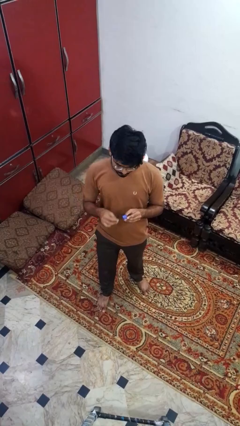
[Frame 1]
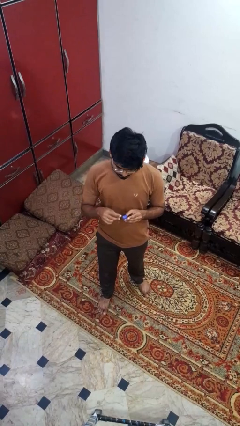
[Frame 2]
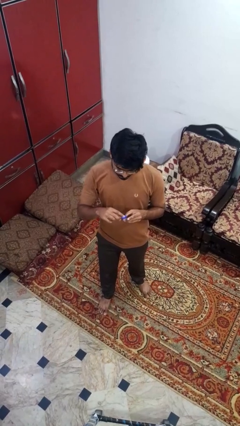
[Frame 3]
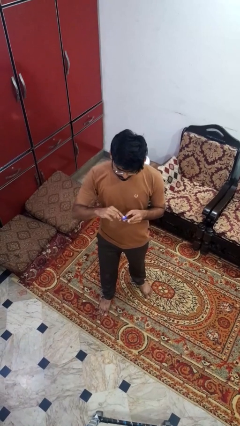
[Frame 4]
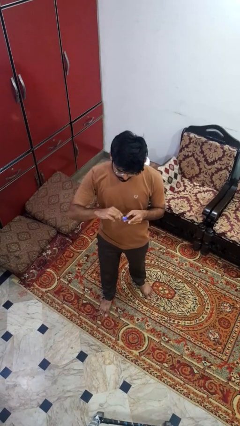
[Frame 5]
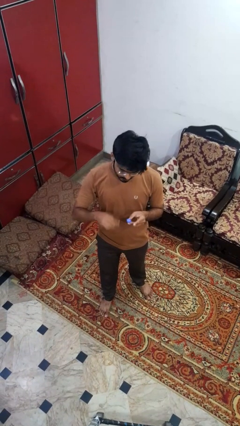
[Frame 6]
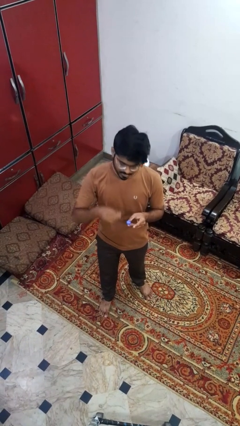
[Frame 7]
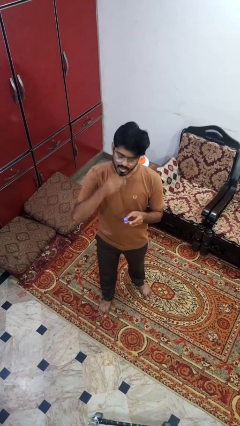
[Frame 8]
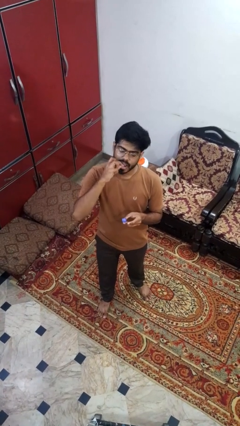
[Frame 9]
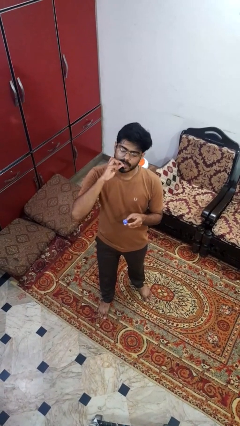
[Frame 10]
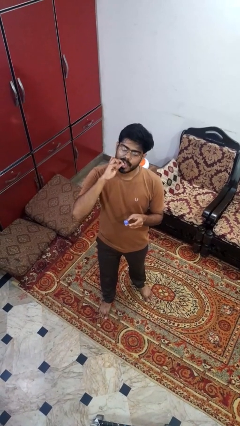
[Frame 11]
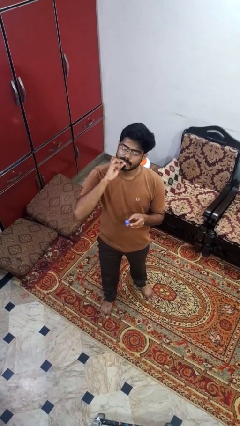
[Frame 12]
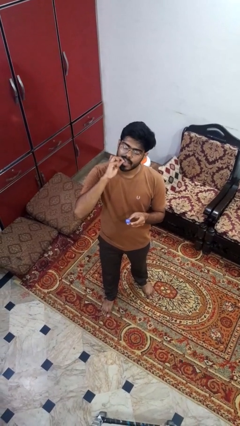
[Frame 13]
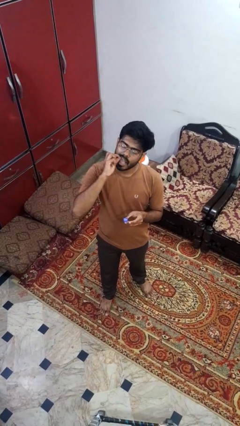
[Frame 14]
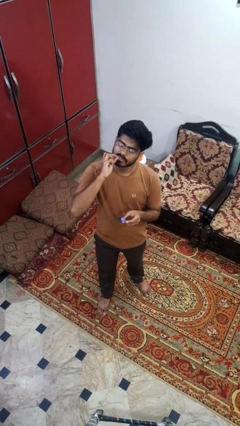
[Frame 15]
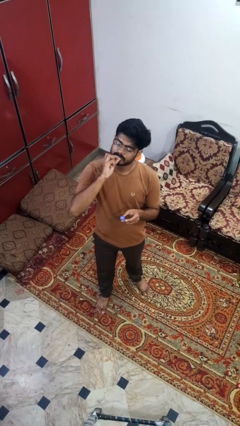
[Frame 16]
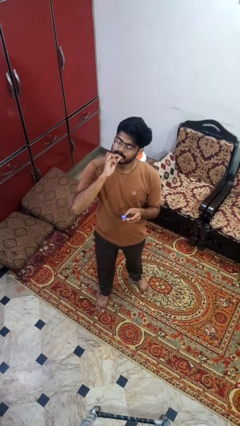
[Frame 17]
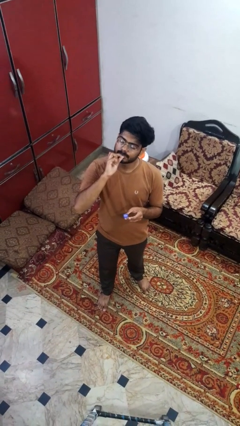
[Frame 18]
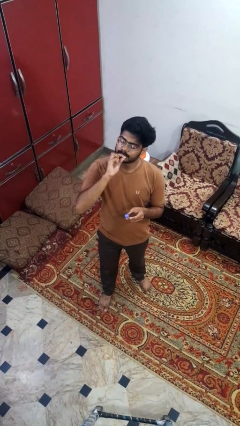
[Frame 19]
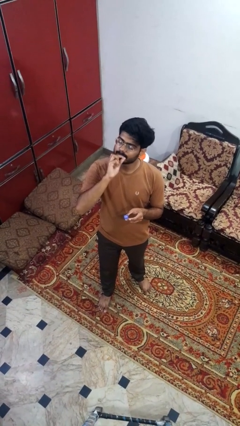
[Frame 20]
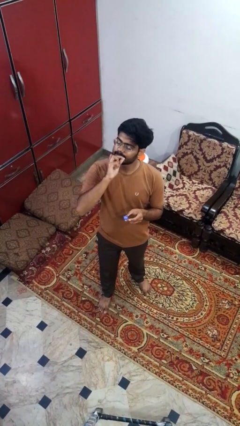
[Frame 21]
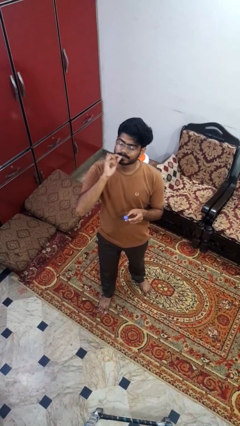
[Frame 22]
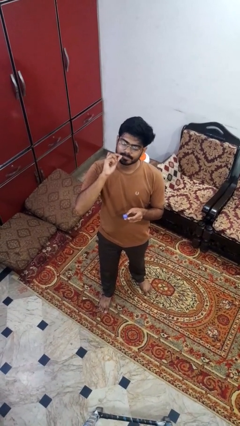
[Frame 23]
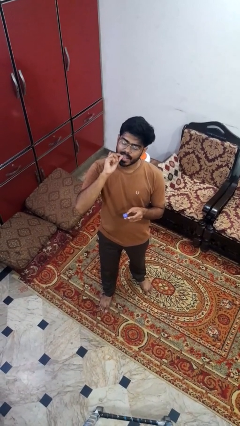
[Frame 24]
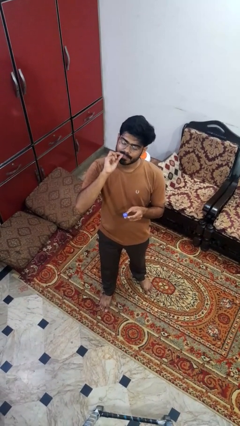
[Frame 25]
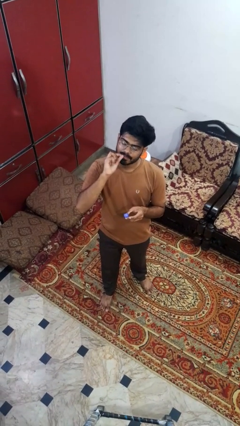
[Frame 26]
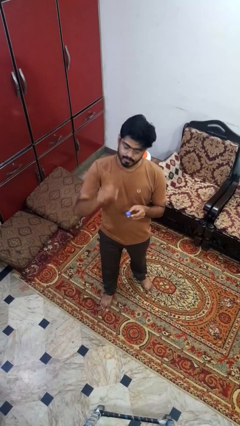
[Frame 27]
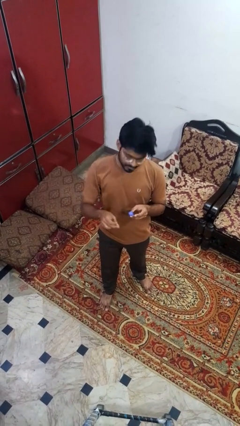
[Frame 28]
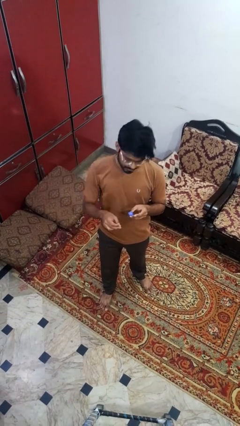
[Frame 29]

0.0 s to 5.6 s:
person flosses

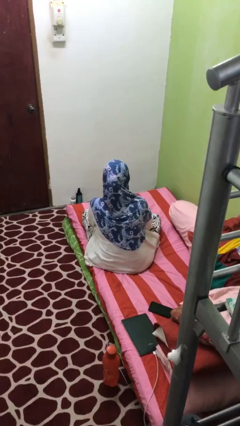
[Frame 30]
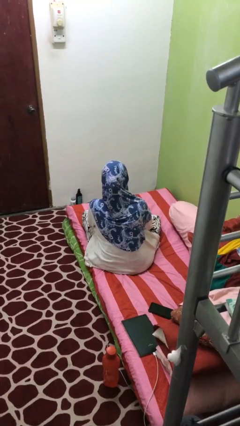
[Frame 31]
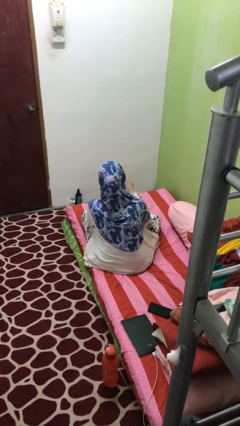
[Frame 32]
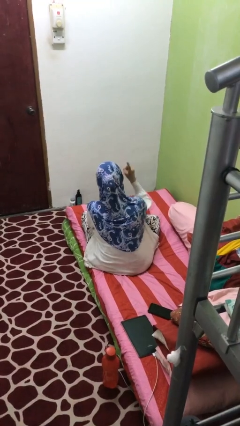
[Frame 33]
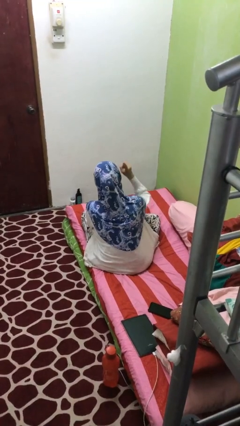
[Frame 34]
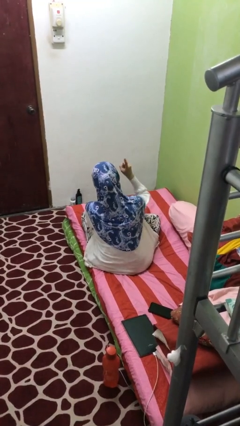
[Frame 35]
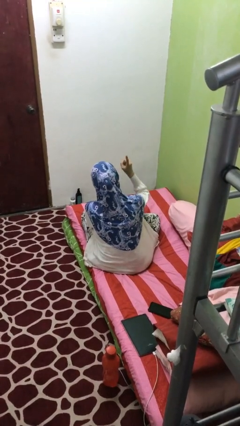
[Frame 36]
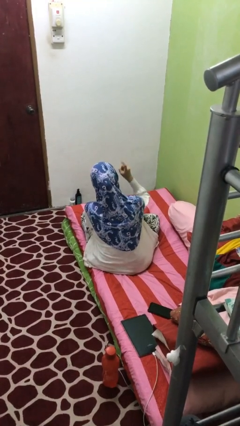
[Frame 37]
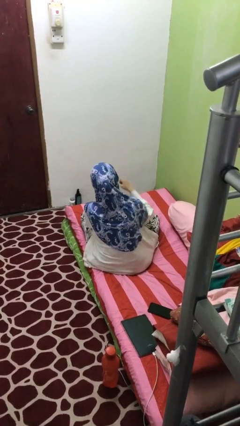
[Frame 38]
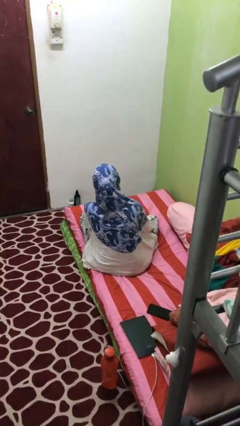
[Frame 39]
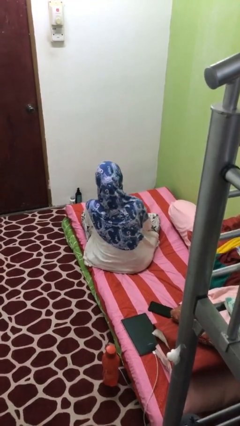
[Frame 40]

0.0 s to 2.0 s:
person gestures number one

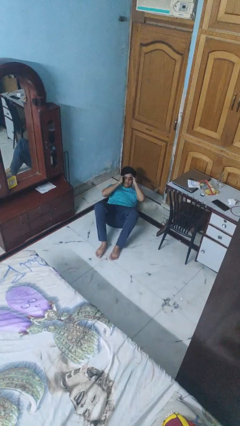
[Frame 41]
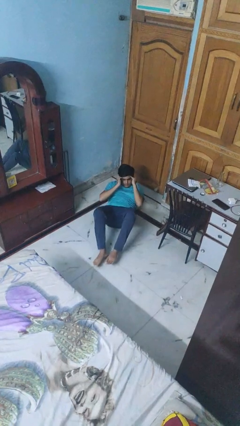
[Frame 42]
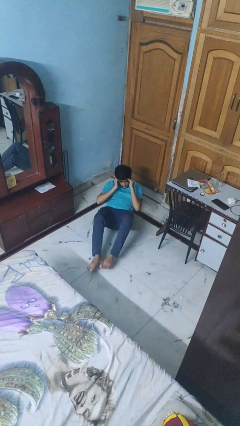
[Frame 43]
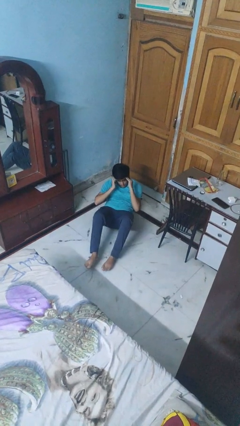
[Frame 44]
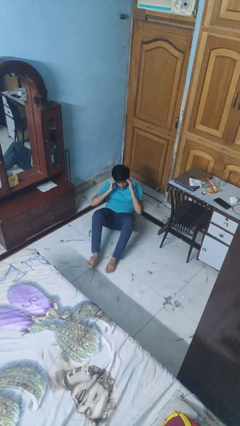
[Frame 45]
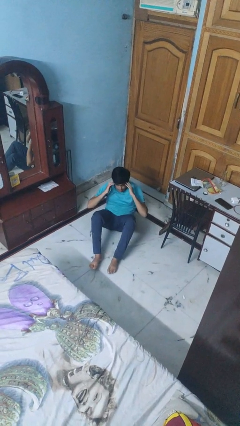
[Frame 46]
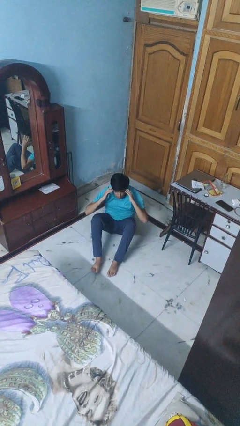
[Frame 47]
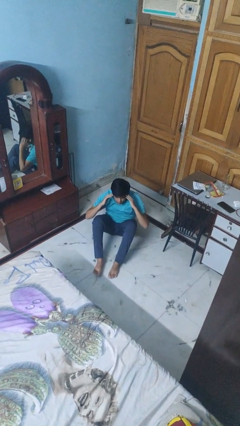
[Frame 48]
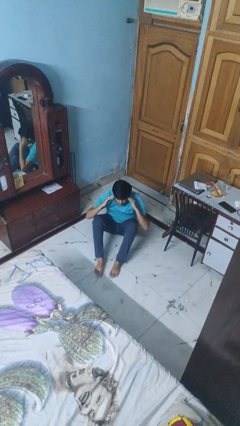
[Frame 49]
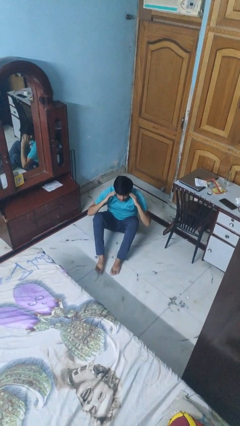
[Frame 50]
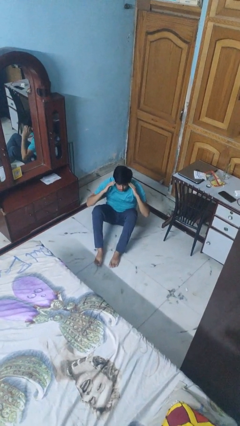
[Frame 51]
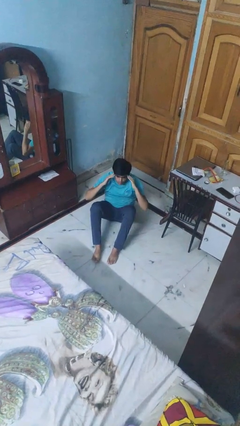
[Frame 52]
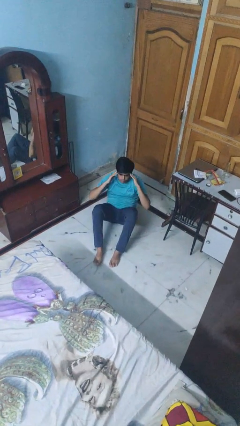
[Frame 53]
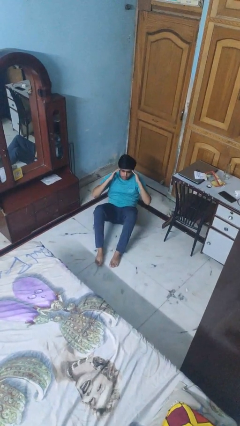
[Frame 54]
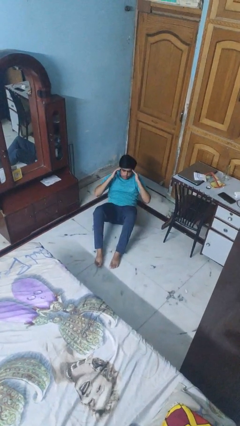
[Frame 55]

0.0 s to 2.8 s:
person exercises with situp

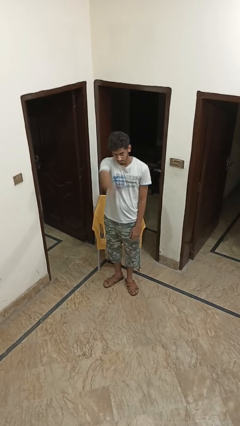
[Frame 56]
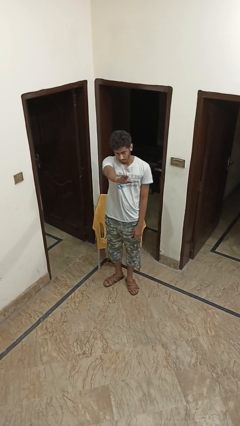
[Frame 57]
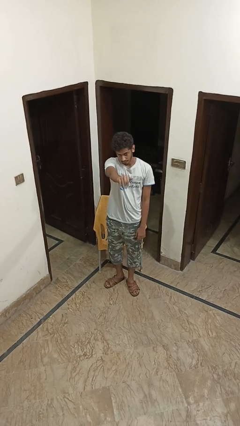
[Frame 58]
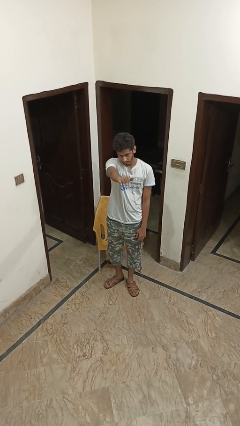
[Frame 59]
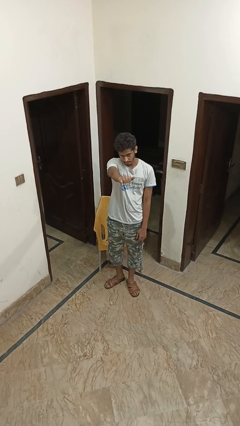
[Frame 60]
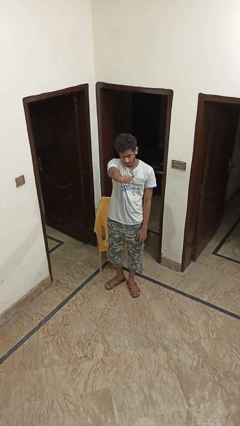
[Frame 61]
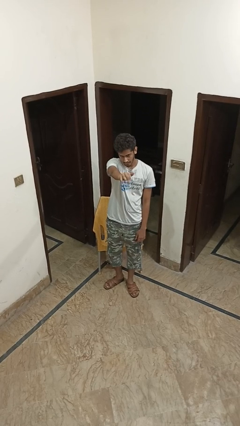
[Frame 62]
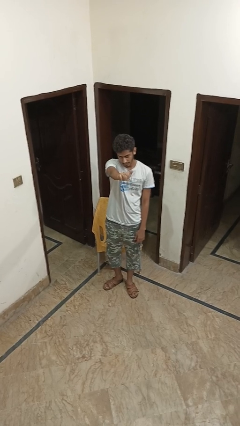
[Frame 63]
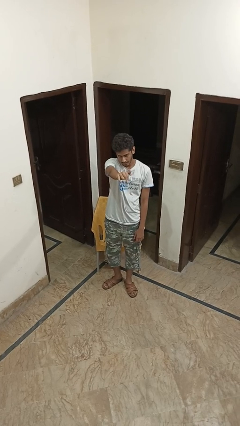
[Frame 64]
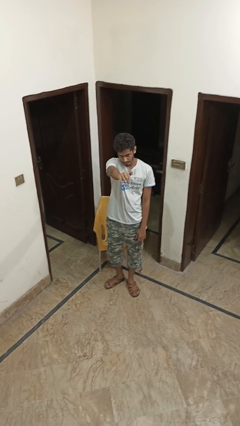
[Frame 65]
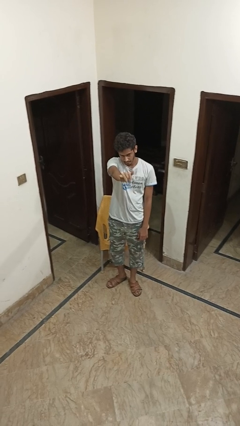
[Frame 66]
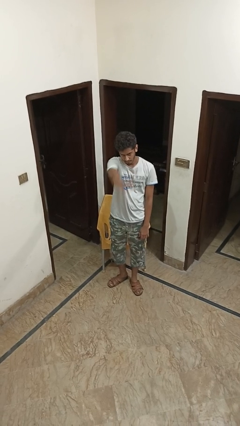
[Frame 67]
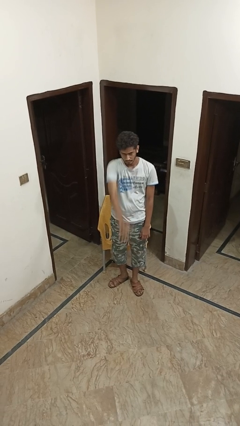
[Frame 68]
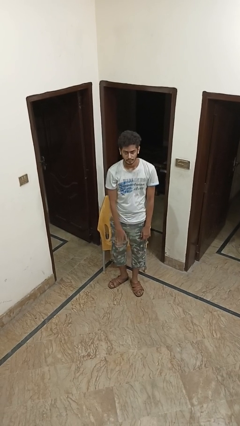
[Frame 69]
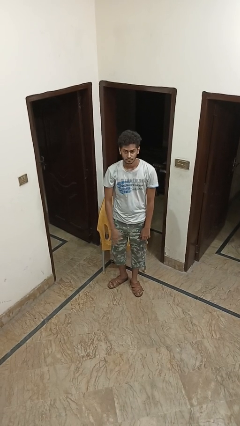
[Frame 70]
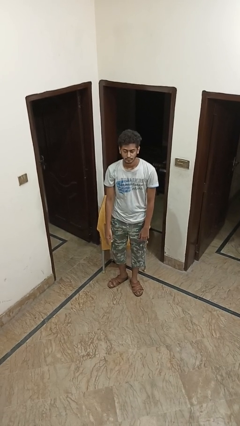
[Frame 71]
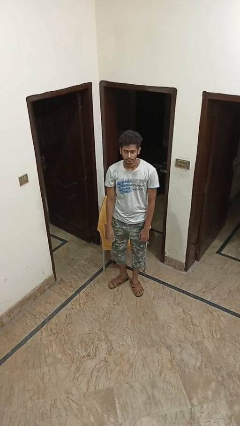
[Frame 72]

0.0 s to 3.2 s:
person gestures come here

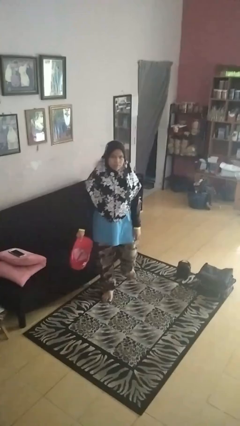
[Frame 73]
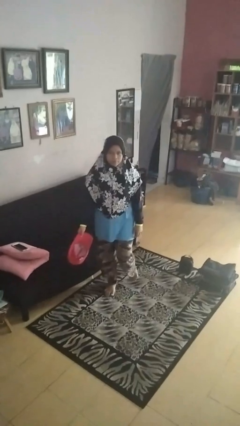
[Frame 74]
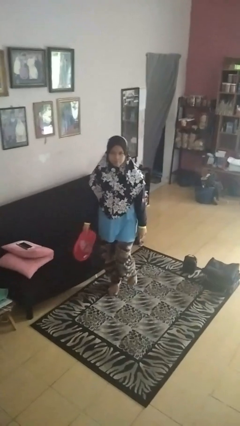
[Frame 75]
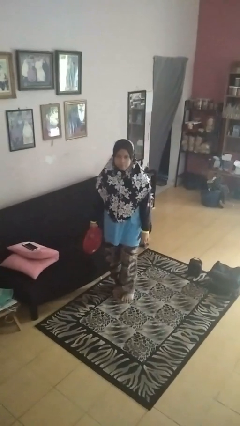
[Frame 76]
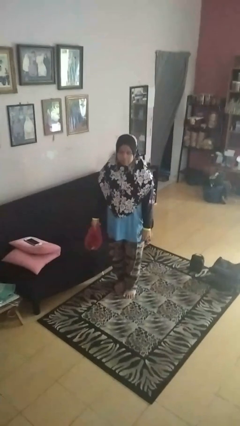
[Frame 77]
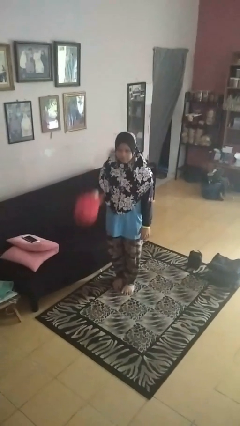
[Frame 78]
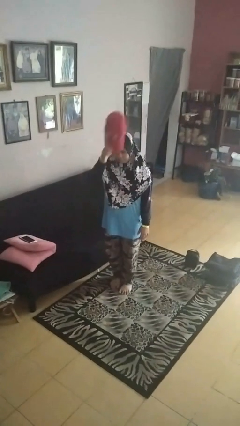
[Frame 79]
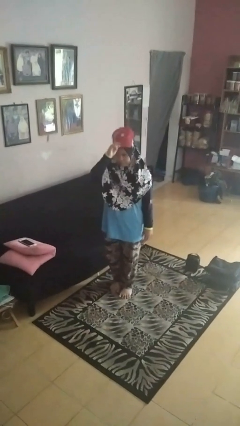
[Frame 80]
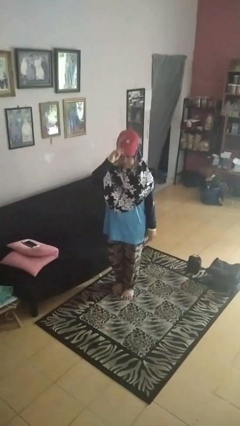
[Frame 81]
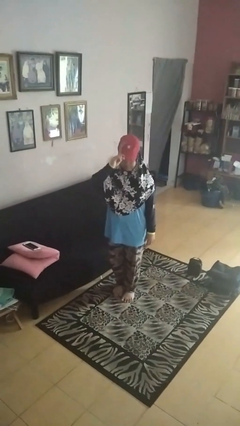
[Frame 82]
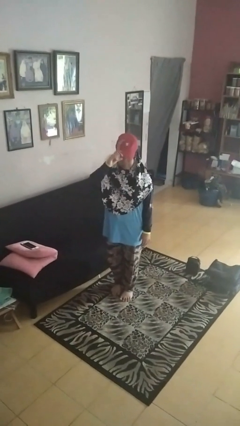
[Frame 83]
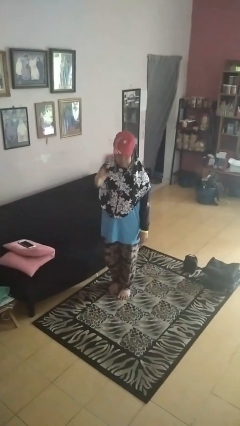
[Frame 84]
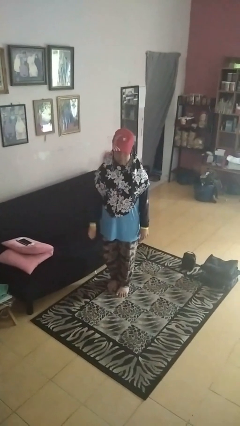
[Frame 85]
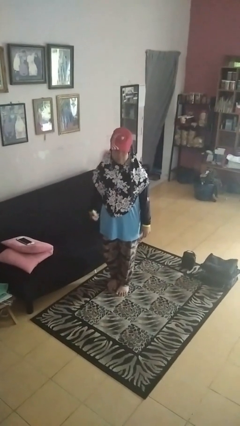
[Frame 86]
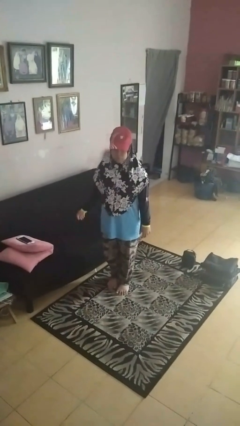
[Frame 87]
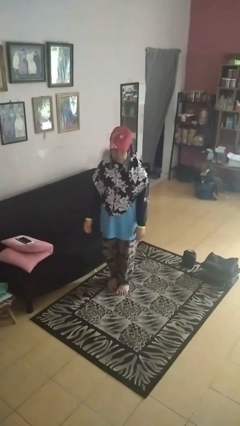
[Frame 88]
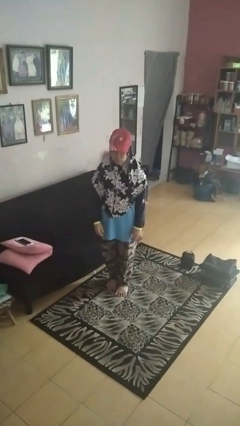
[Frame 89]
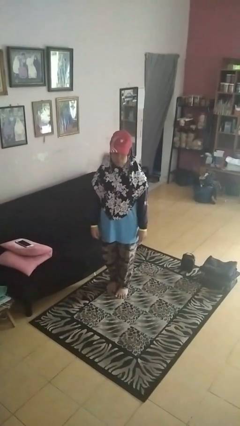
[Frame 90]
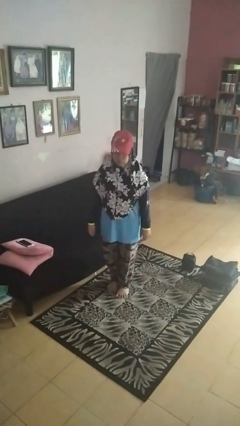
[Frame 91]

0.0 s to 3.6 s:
person puts on hat
